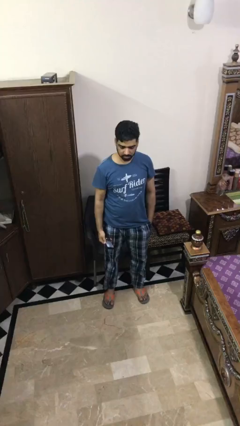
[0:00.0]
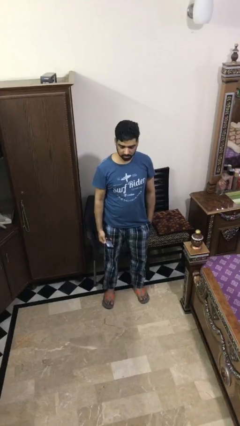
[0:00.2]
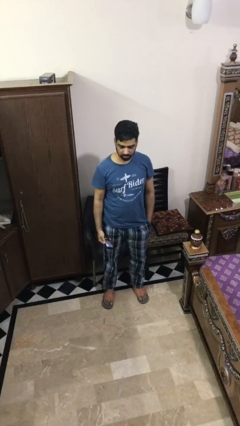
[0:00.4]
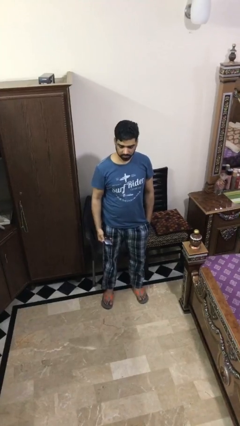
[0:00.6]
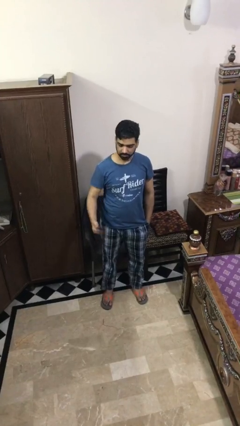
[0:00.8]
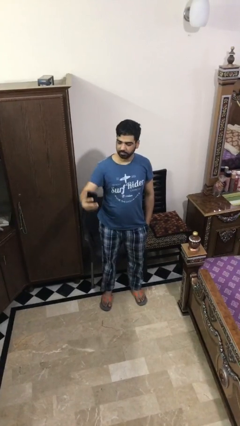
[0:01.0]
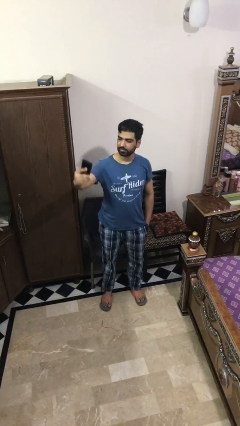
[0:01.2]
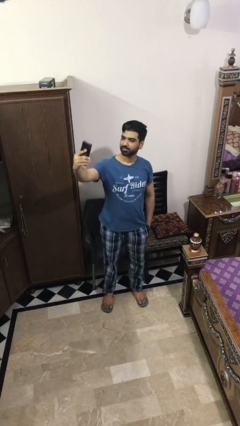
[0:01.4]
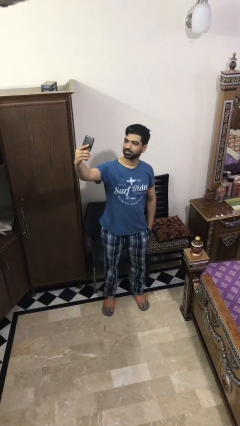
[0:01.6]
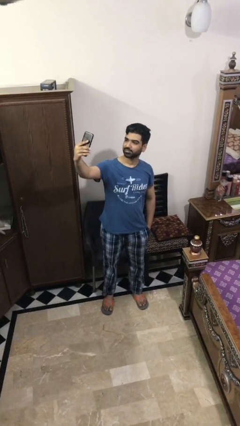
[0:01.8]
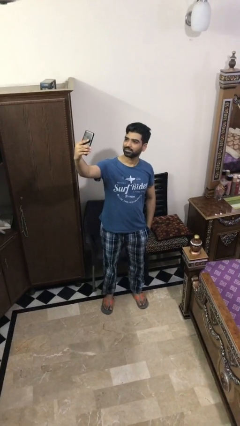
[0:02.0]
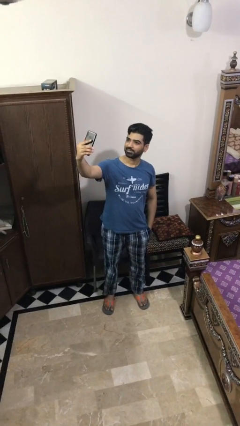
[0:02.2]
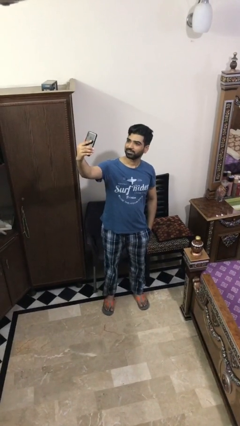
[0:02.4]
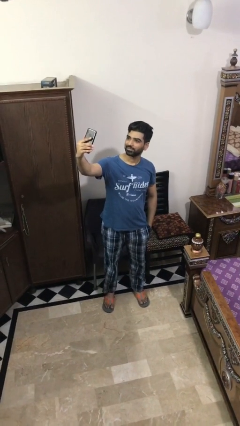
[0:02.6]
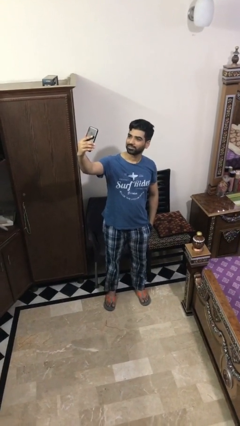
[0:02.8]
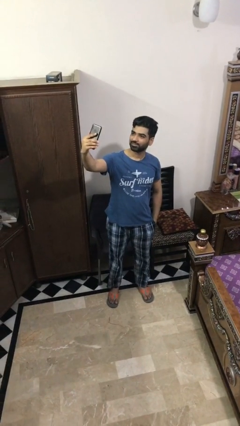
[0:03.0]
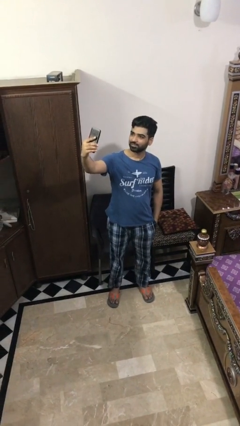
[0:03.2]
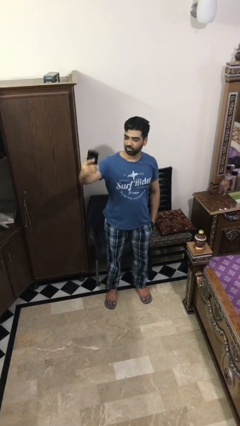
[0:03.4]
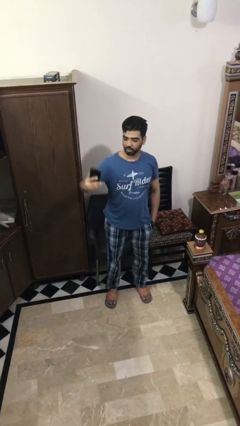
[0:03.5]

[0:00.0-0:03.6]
person takes selfie

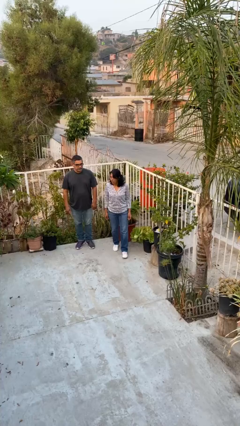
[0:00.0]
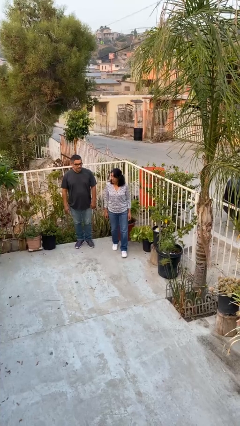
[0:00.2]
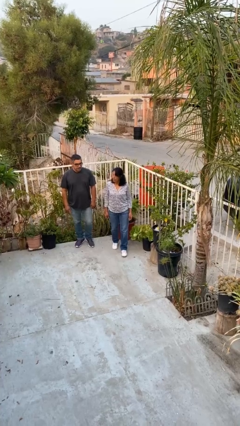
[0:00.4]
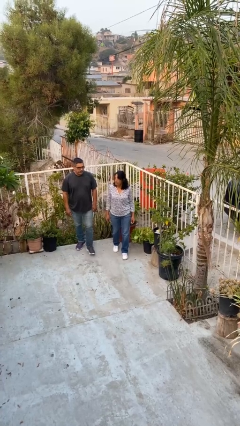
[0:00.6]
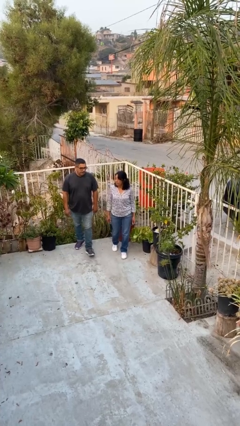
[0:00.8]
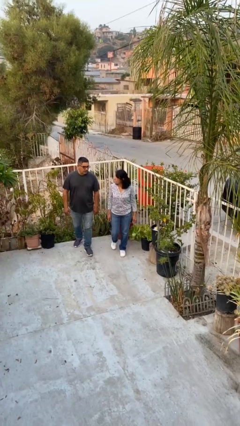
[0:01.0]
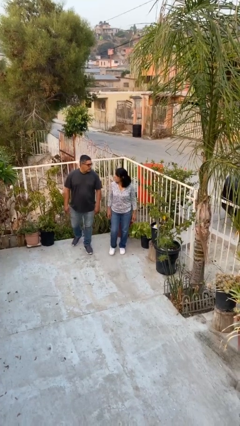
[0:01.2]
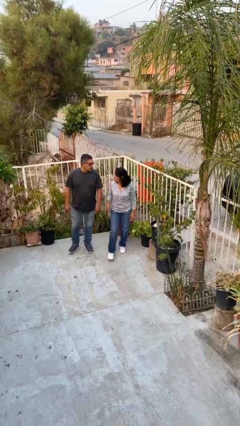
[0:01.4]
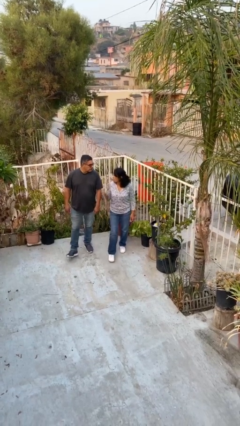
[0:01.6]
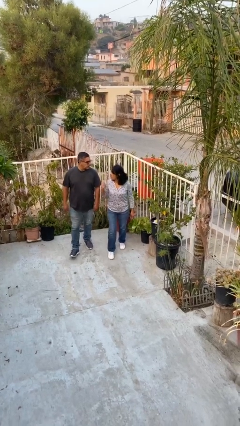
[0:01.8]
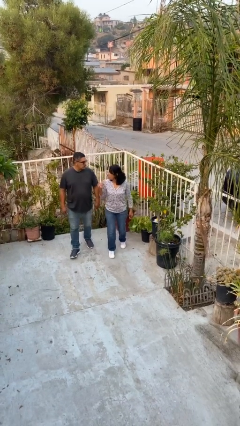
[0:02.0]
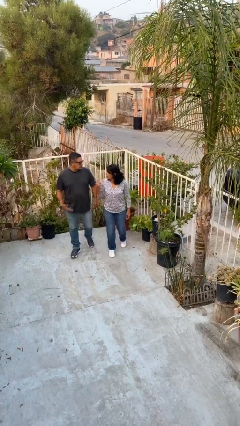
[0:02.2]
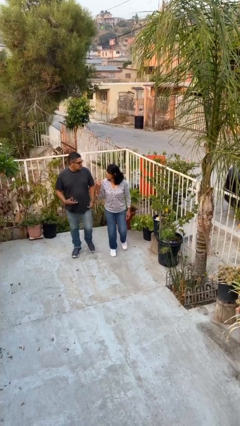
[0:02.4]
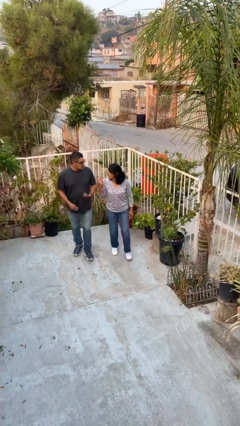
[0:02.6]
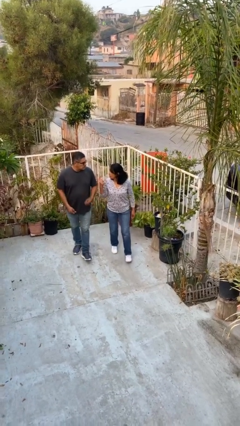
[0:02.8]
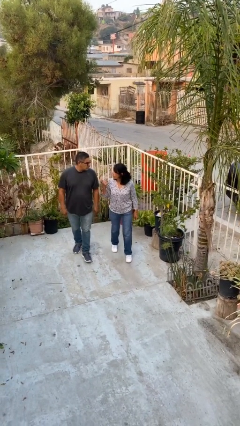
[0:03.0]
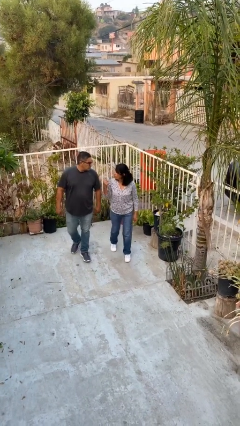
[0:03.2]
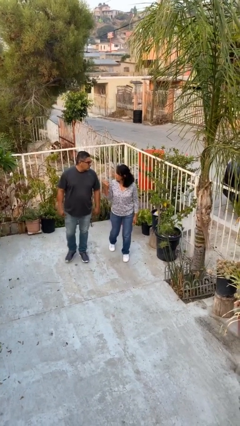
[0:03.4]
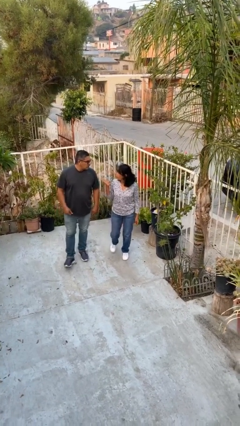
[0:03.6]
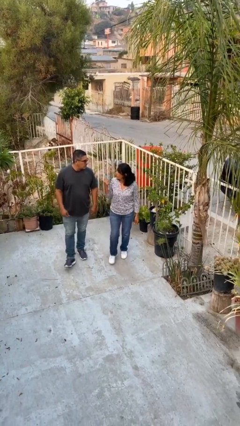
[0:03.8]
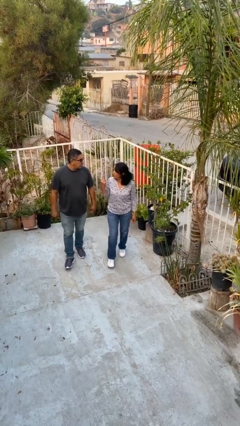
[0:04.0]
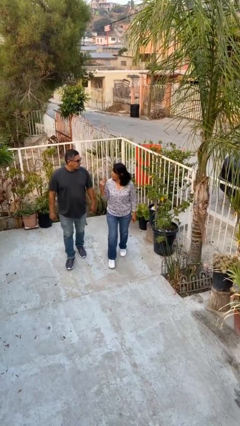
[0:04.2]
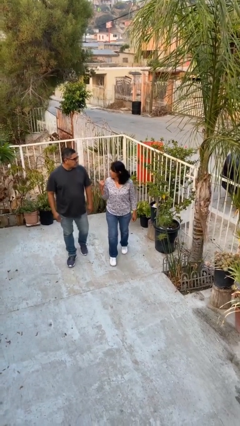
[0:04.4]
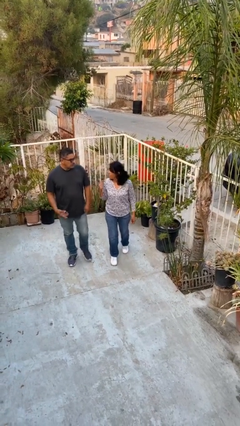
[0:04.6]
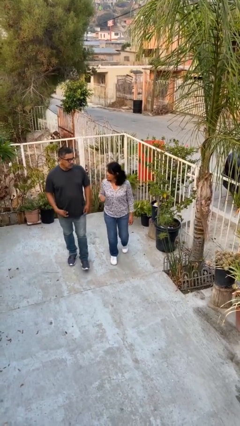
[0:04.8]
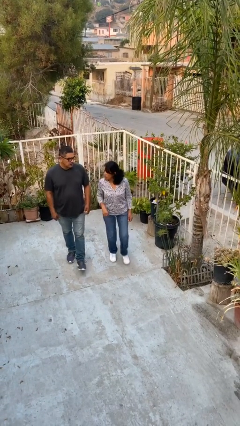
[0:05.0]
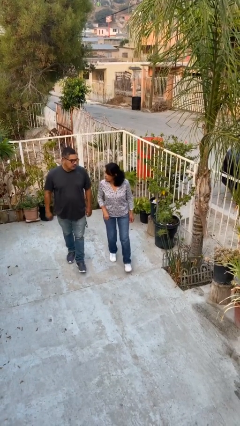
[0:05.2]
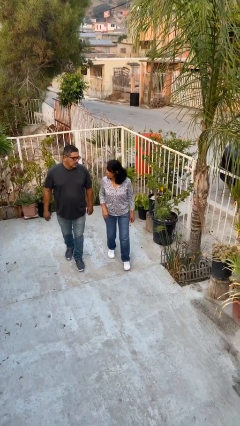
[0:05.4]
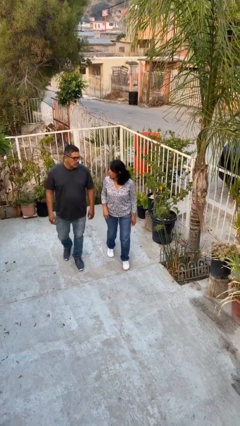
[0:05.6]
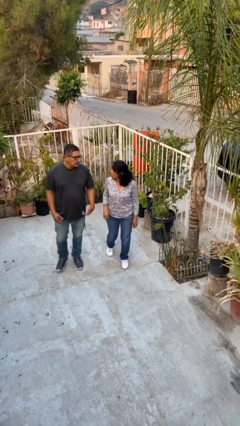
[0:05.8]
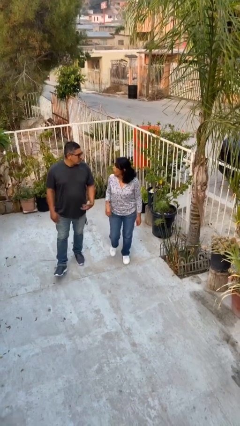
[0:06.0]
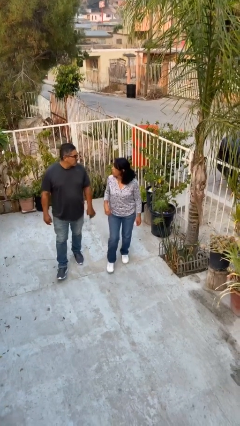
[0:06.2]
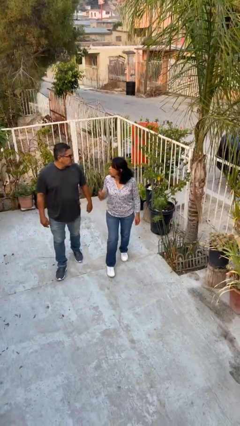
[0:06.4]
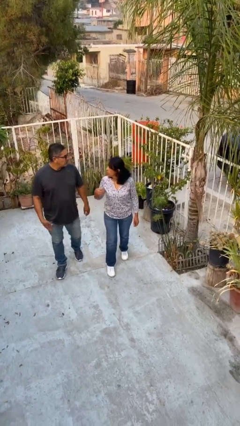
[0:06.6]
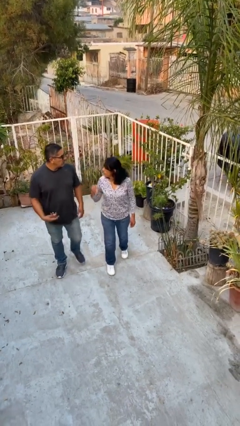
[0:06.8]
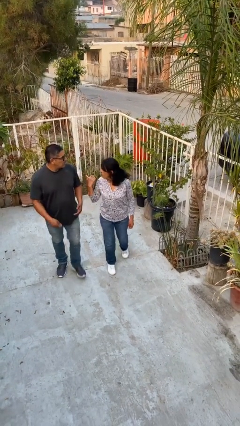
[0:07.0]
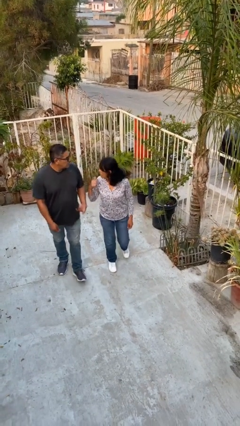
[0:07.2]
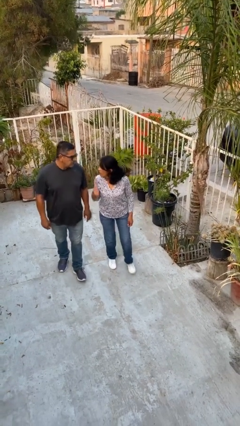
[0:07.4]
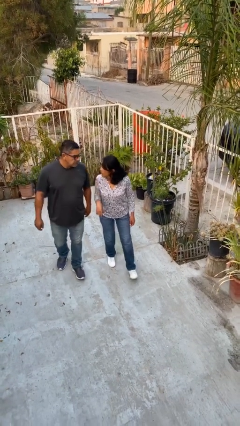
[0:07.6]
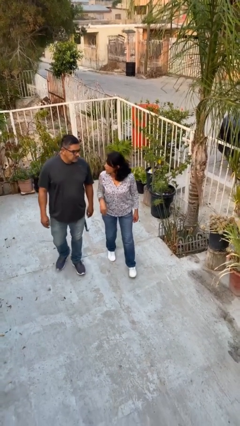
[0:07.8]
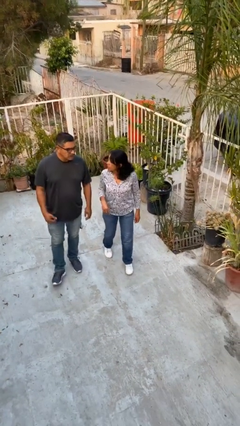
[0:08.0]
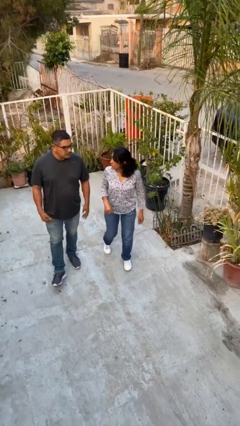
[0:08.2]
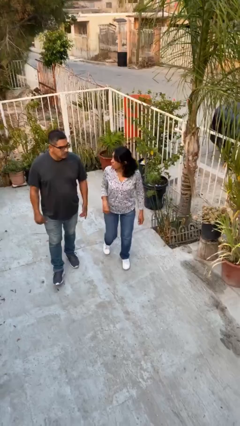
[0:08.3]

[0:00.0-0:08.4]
person talks to person

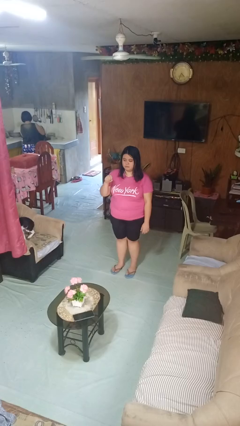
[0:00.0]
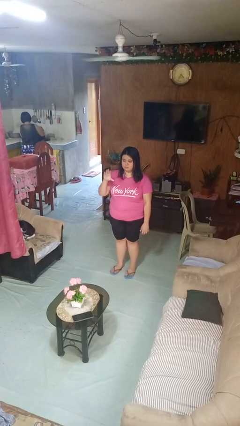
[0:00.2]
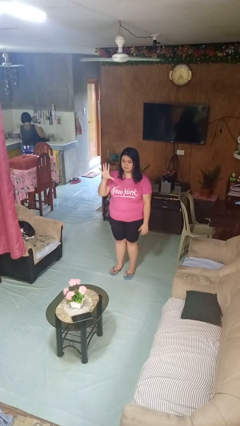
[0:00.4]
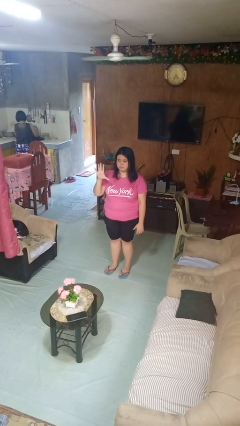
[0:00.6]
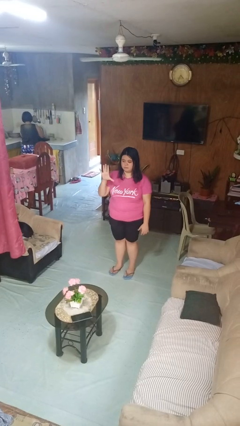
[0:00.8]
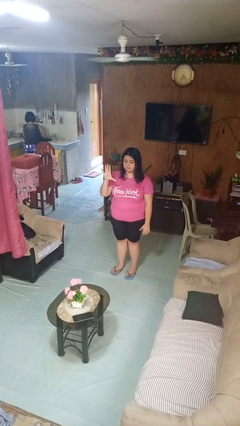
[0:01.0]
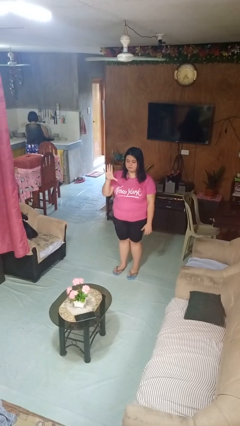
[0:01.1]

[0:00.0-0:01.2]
person gestures zoom in

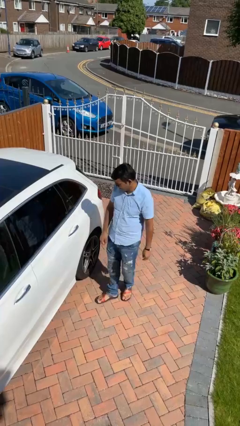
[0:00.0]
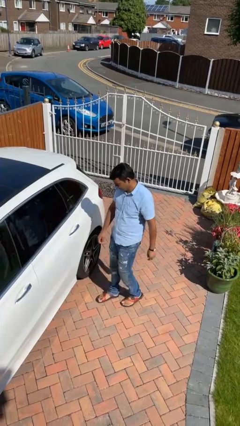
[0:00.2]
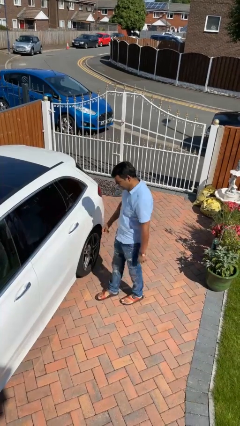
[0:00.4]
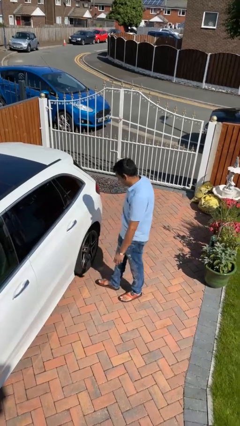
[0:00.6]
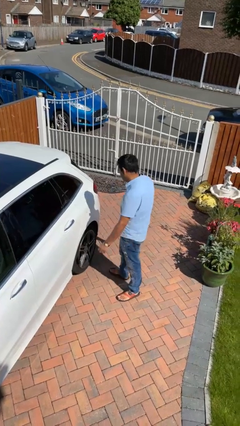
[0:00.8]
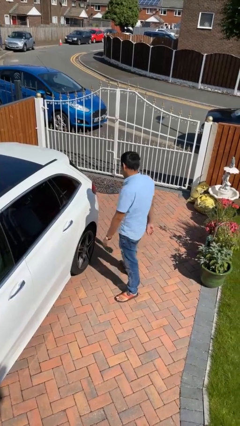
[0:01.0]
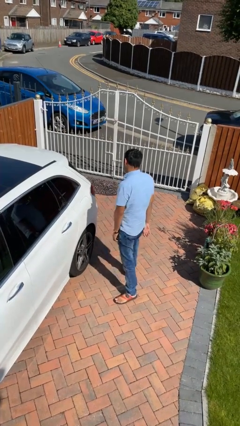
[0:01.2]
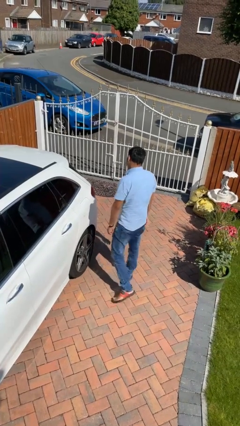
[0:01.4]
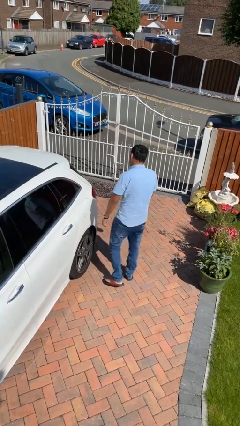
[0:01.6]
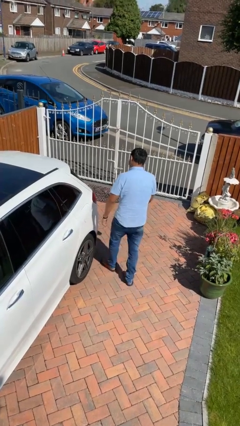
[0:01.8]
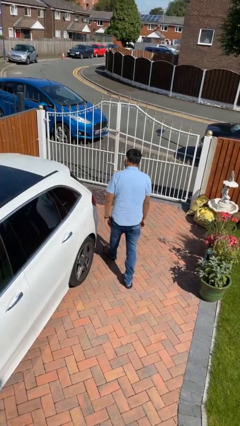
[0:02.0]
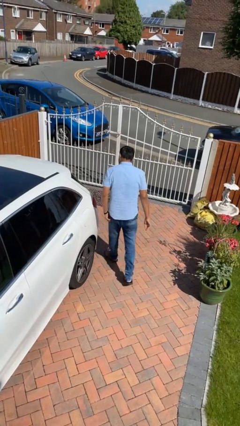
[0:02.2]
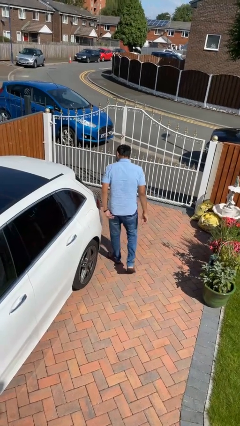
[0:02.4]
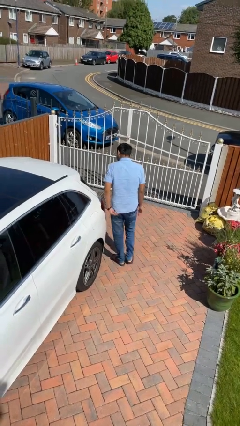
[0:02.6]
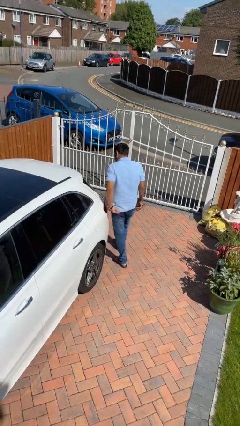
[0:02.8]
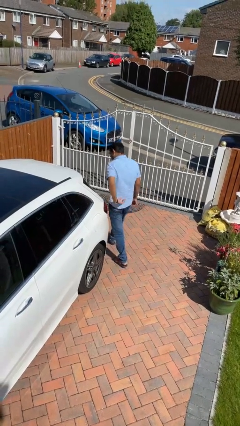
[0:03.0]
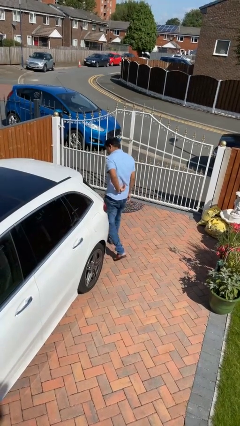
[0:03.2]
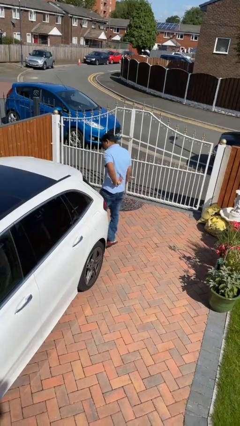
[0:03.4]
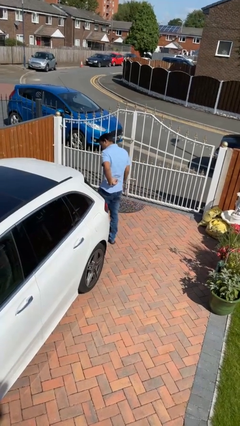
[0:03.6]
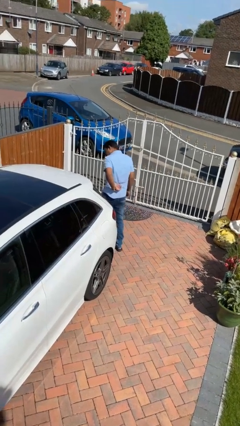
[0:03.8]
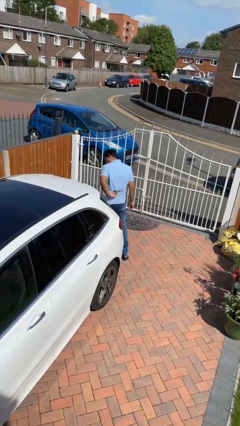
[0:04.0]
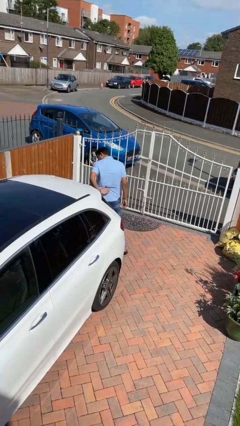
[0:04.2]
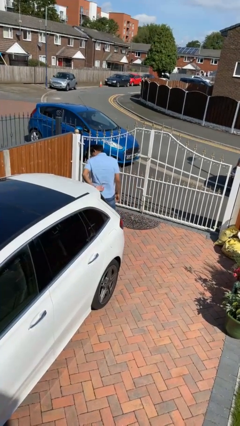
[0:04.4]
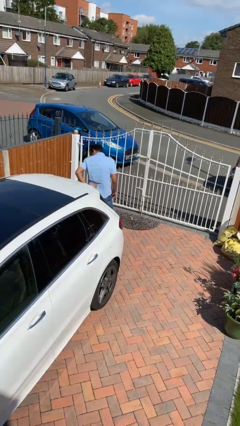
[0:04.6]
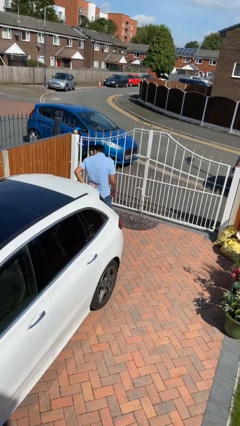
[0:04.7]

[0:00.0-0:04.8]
person walks around car

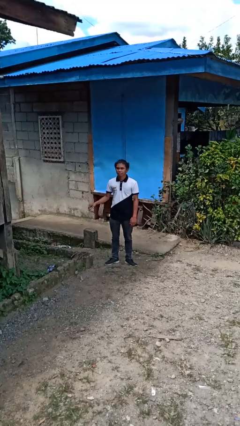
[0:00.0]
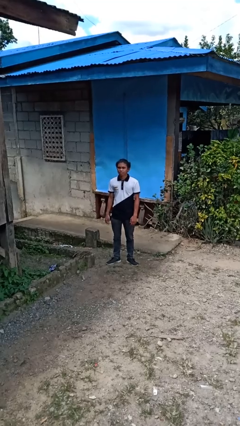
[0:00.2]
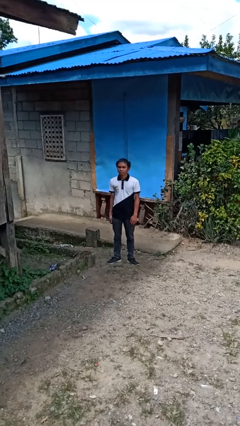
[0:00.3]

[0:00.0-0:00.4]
person gestures swipe right
